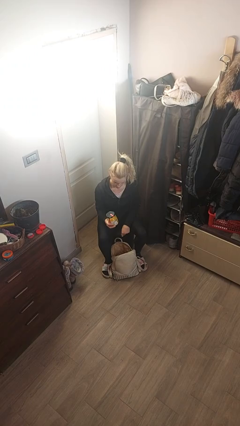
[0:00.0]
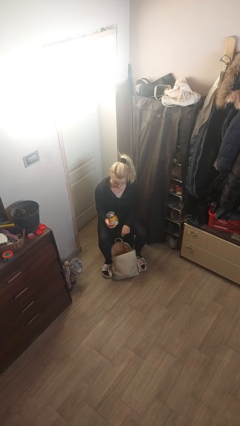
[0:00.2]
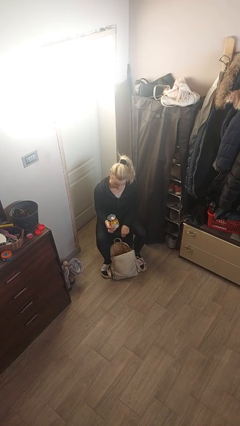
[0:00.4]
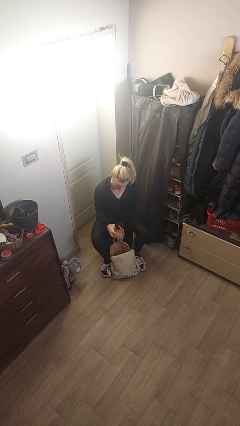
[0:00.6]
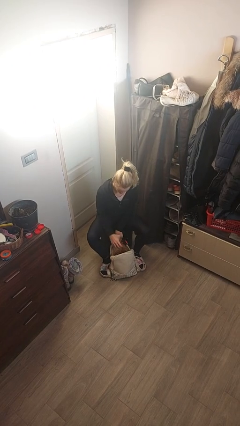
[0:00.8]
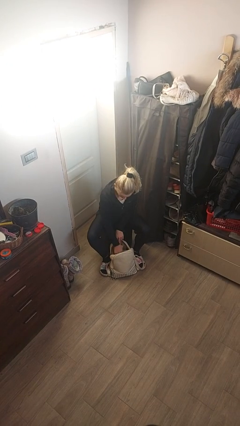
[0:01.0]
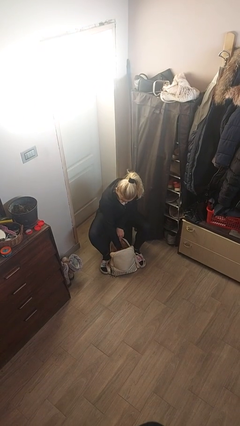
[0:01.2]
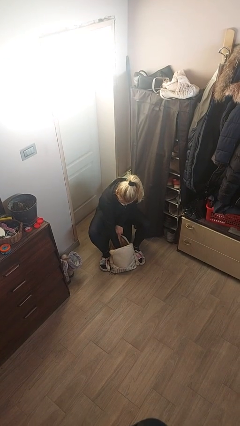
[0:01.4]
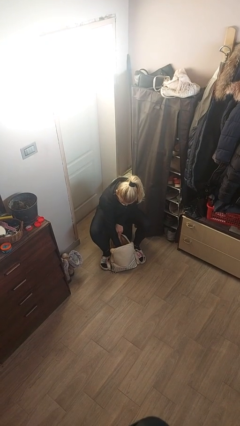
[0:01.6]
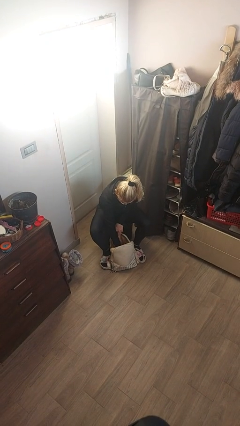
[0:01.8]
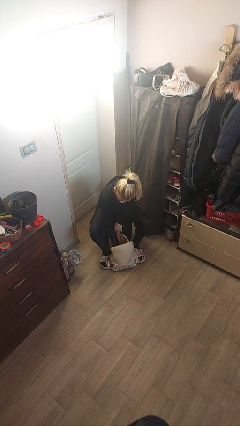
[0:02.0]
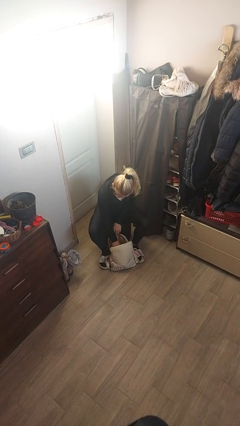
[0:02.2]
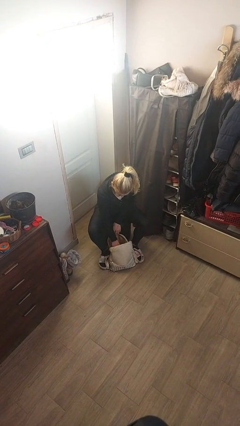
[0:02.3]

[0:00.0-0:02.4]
person puts object into backpack

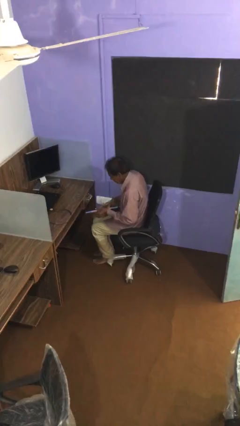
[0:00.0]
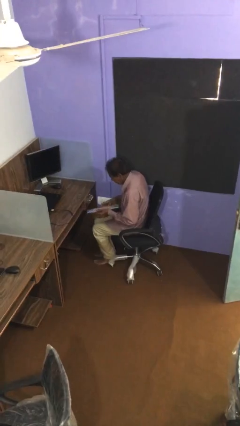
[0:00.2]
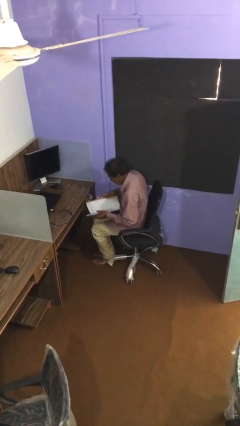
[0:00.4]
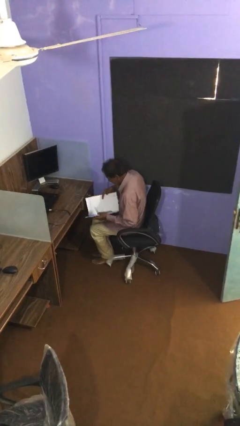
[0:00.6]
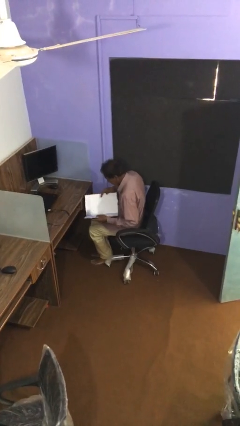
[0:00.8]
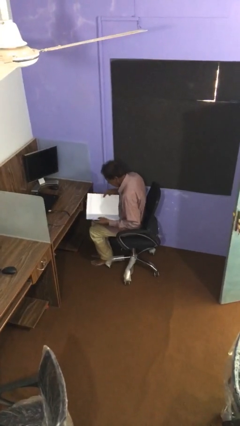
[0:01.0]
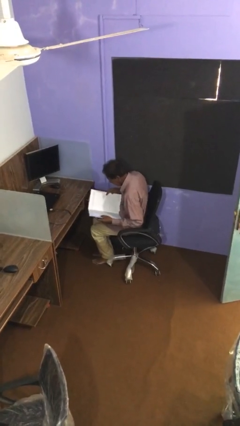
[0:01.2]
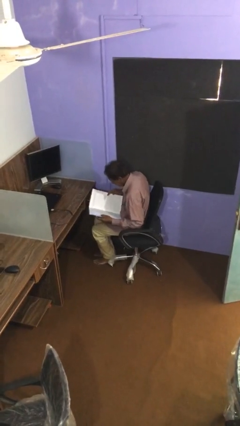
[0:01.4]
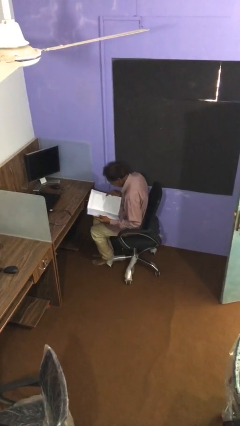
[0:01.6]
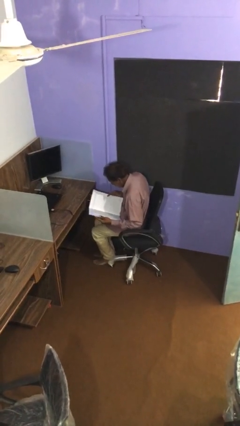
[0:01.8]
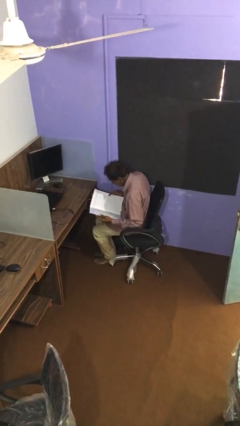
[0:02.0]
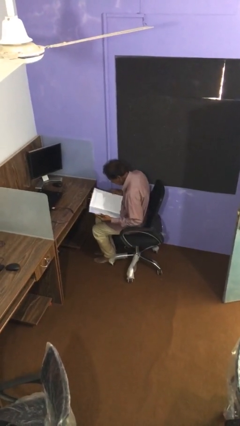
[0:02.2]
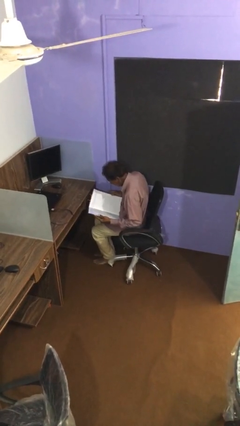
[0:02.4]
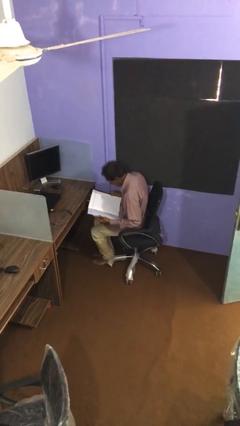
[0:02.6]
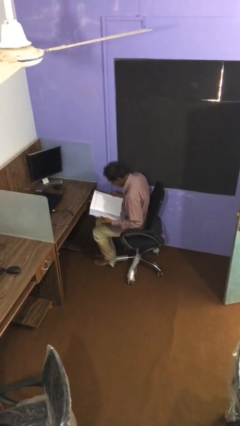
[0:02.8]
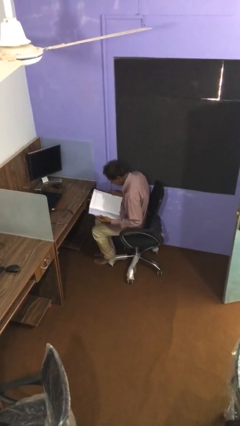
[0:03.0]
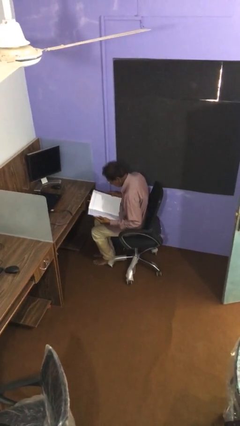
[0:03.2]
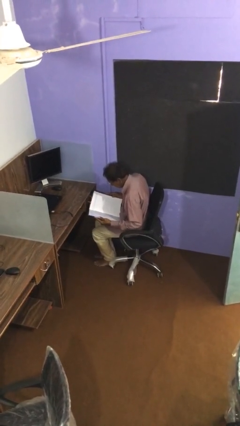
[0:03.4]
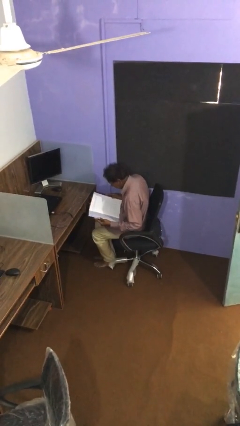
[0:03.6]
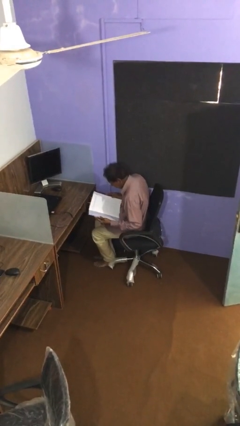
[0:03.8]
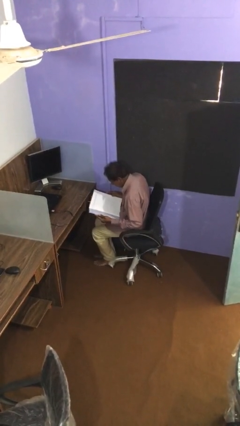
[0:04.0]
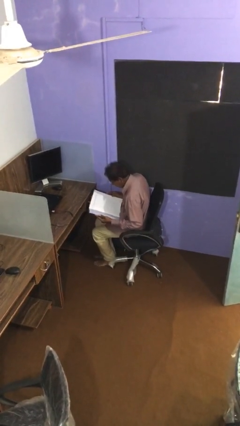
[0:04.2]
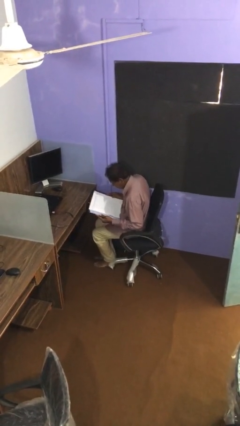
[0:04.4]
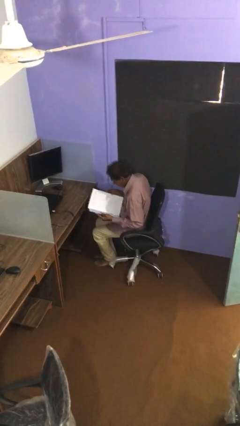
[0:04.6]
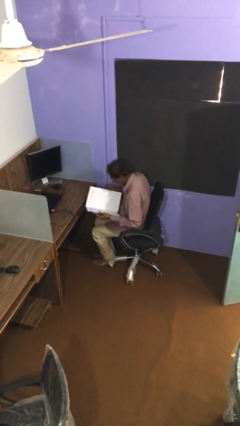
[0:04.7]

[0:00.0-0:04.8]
person reads document

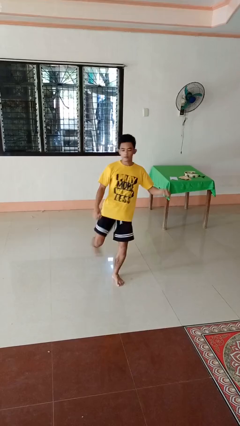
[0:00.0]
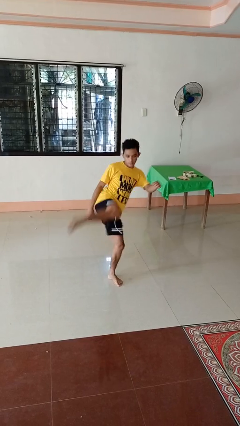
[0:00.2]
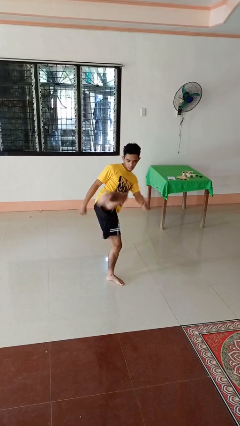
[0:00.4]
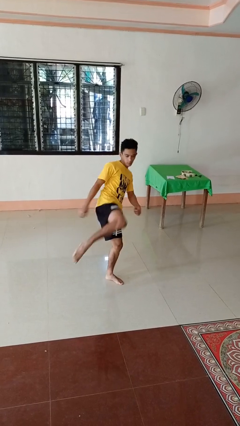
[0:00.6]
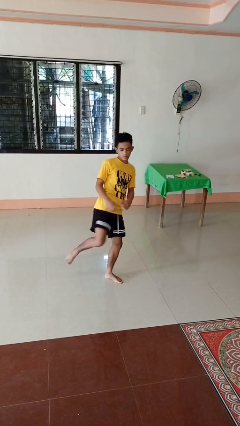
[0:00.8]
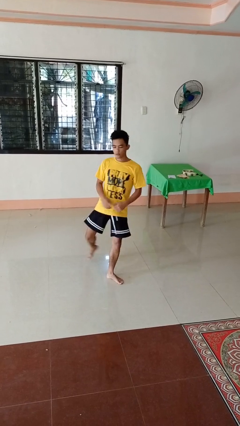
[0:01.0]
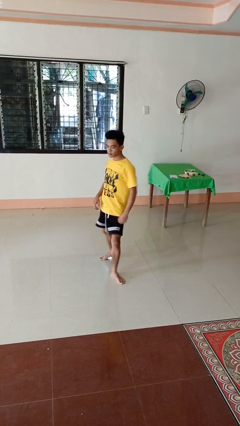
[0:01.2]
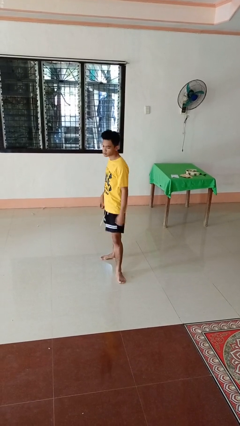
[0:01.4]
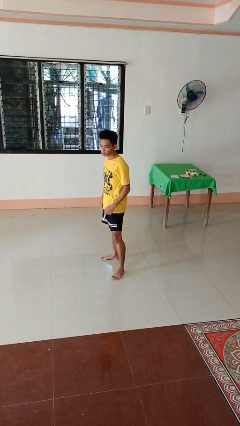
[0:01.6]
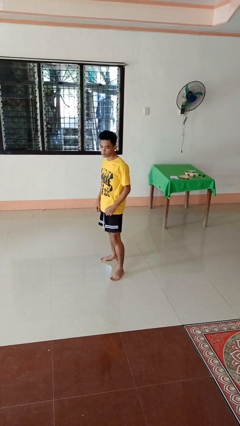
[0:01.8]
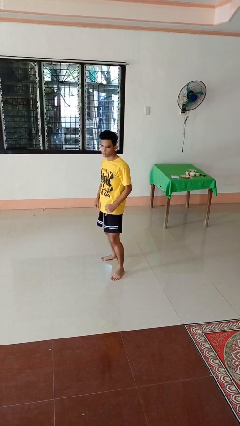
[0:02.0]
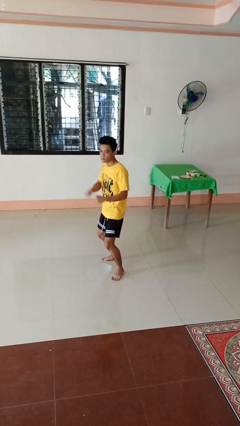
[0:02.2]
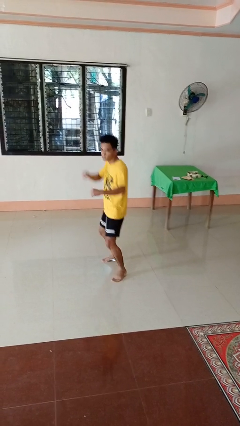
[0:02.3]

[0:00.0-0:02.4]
person karate kicks

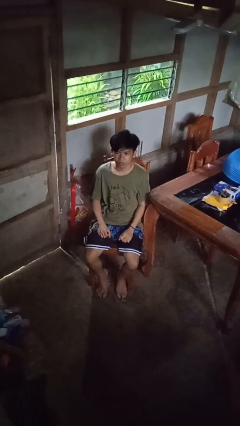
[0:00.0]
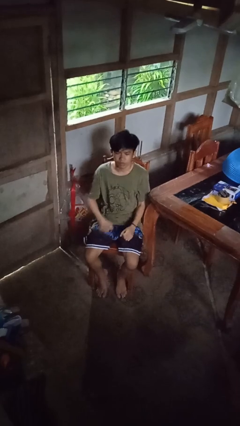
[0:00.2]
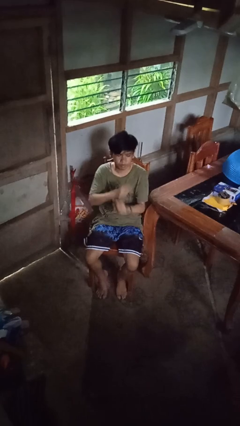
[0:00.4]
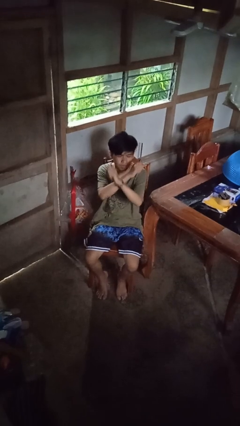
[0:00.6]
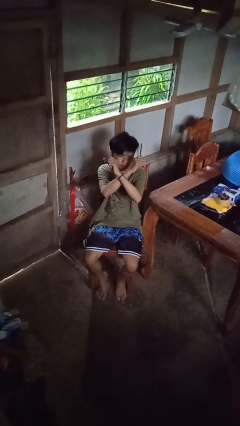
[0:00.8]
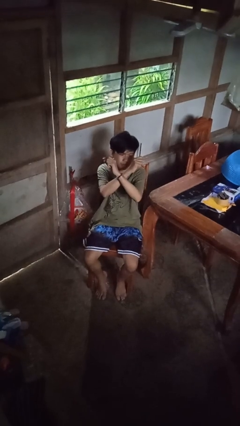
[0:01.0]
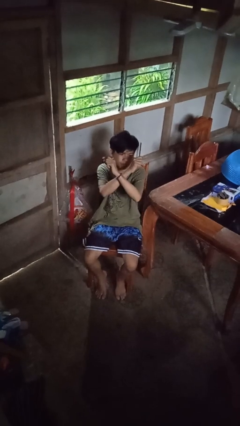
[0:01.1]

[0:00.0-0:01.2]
person gestures arms x

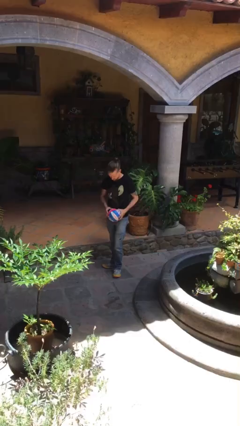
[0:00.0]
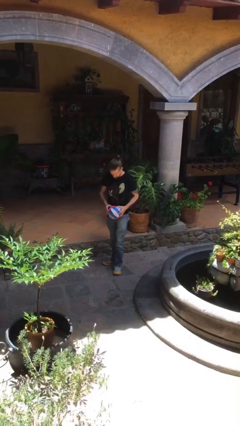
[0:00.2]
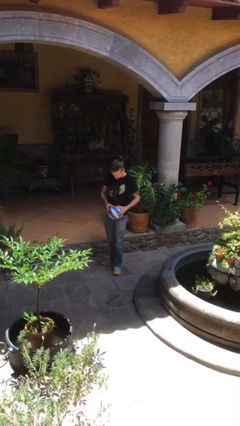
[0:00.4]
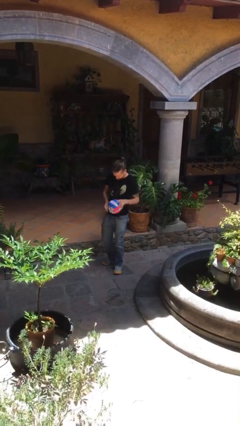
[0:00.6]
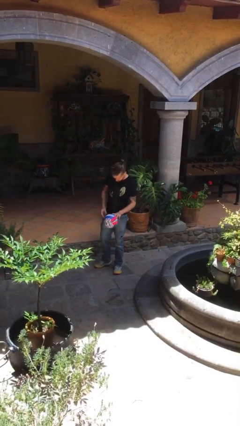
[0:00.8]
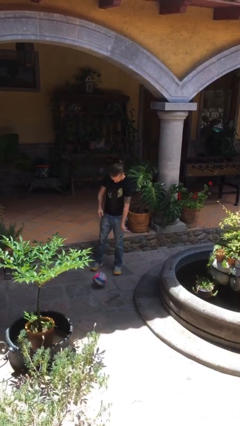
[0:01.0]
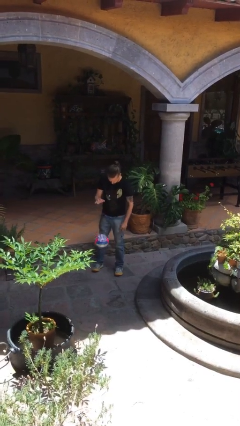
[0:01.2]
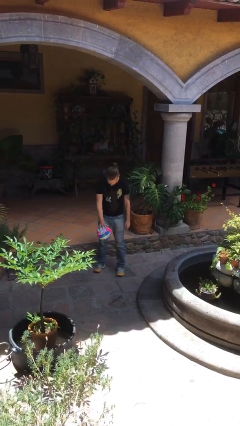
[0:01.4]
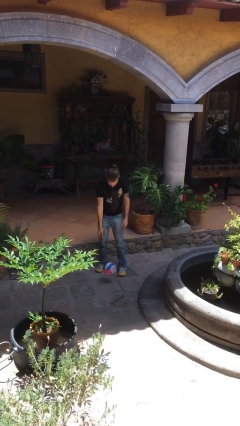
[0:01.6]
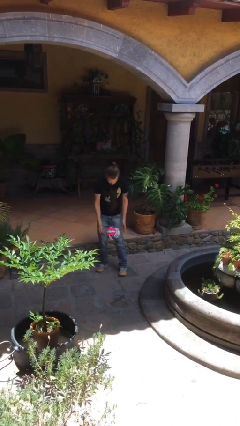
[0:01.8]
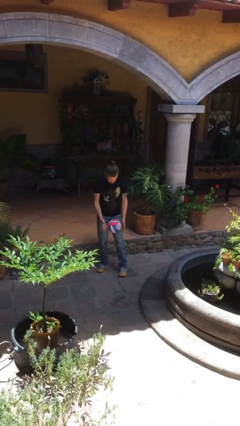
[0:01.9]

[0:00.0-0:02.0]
person bounces ball on floor

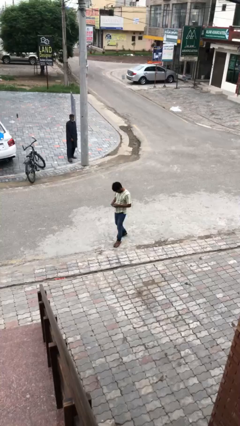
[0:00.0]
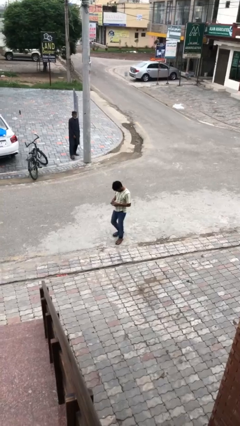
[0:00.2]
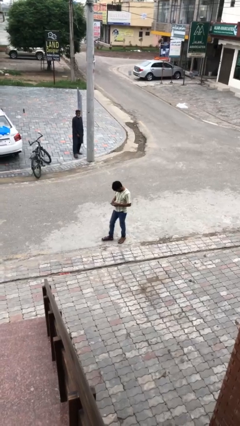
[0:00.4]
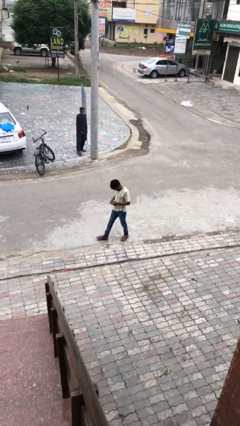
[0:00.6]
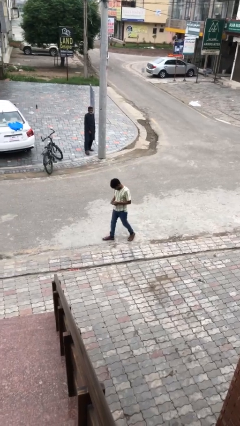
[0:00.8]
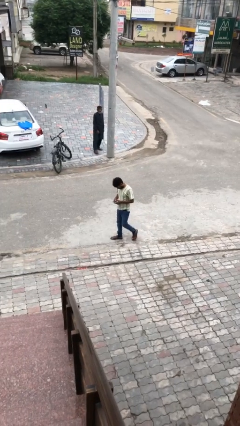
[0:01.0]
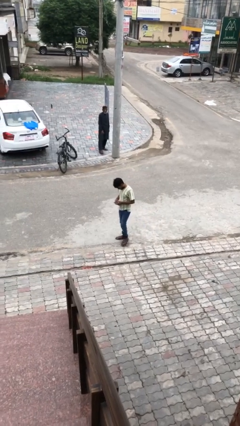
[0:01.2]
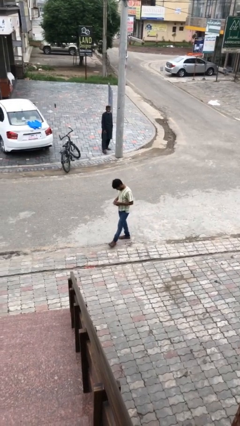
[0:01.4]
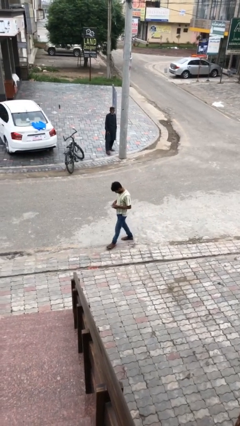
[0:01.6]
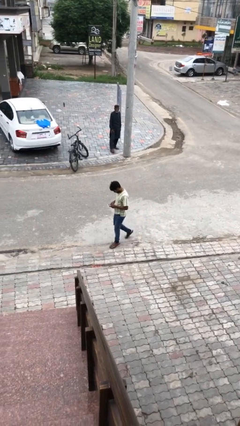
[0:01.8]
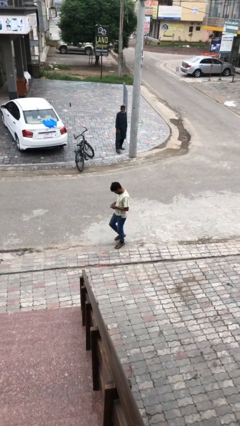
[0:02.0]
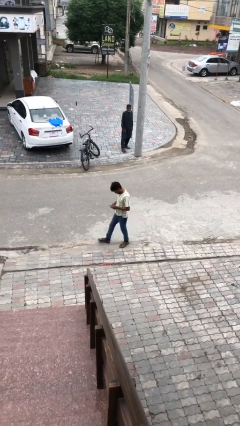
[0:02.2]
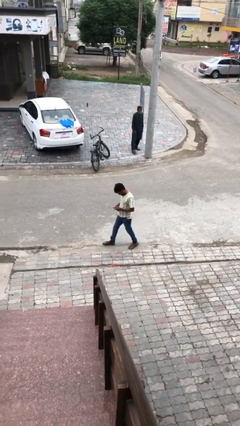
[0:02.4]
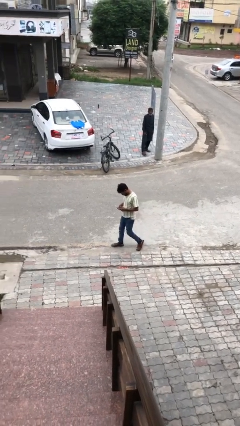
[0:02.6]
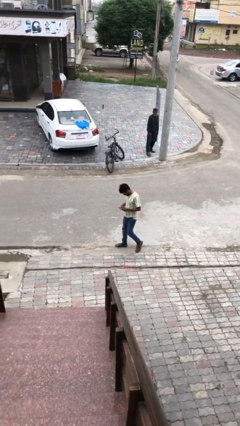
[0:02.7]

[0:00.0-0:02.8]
person texts on phone

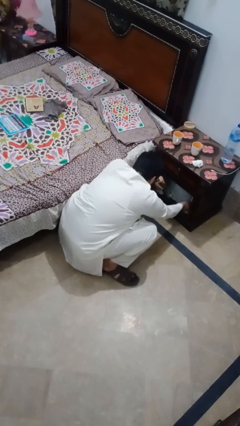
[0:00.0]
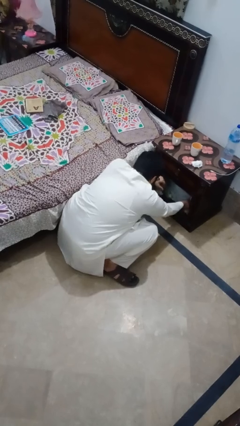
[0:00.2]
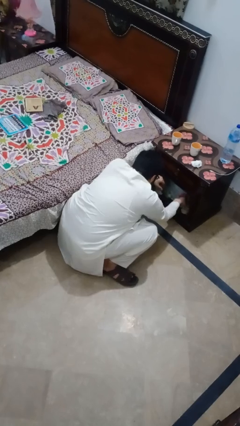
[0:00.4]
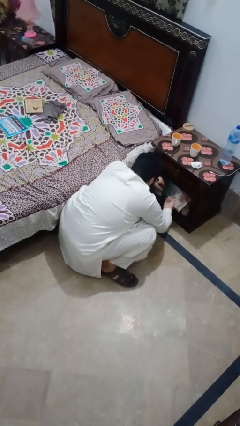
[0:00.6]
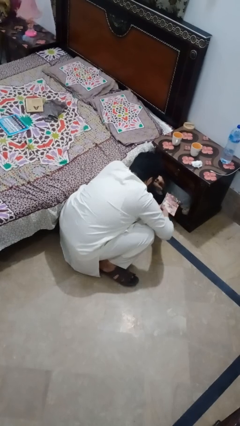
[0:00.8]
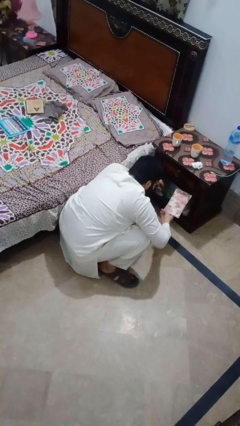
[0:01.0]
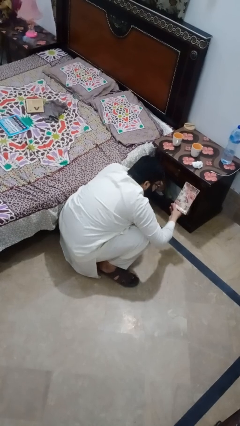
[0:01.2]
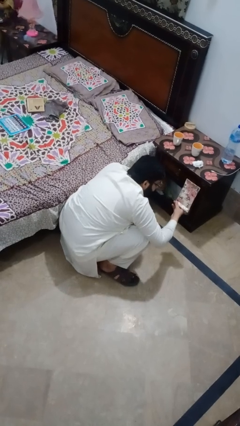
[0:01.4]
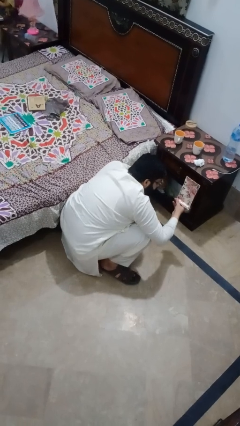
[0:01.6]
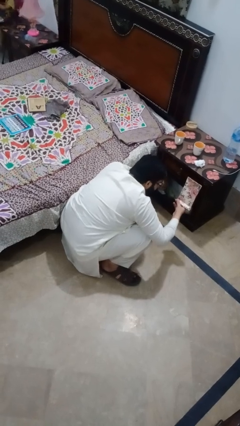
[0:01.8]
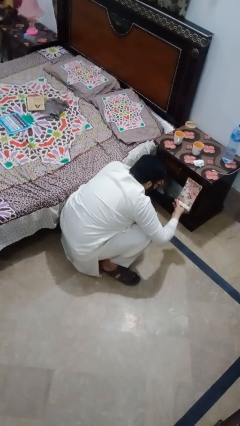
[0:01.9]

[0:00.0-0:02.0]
person picks up object from cabinet
